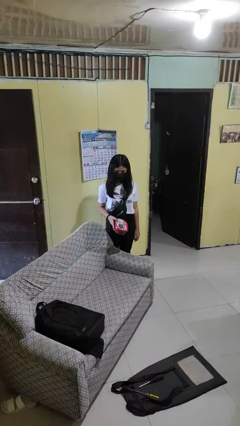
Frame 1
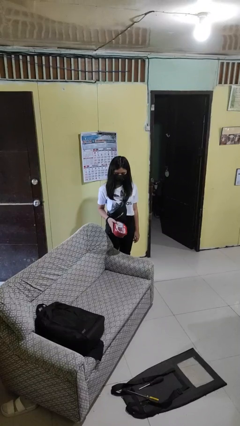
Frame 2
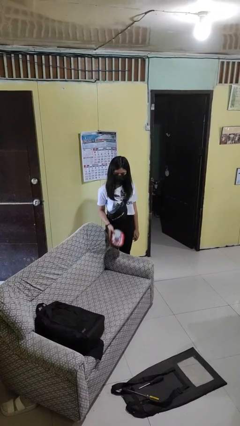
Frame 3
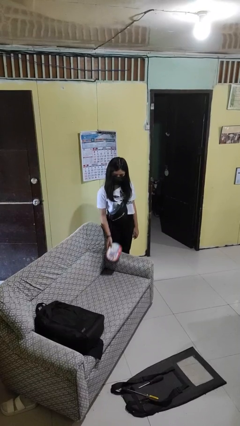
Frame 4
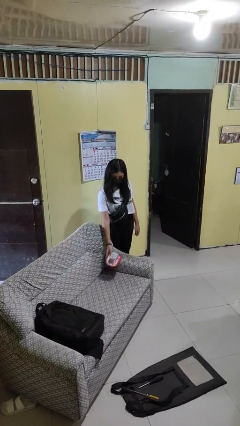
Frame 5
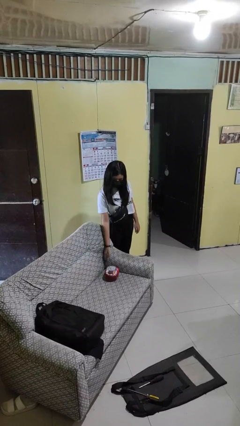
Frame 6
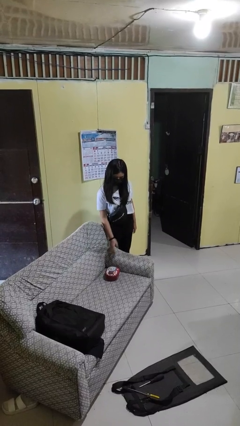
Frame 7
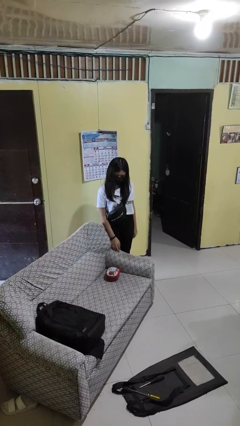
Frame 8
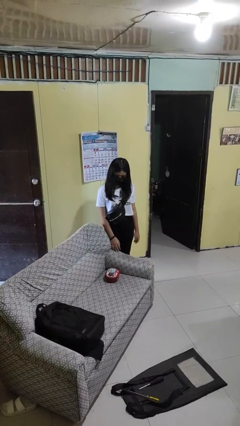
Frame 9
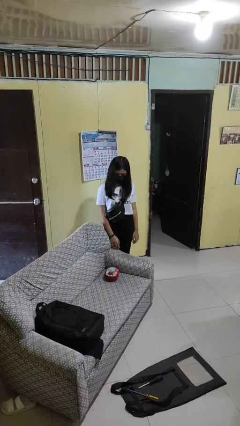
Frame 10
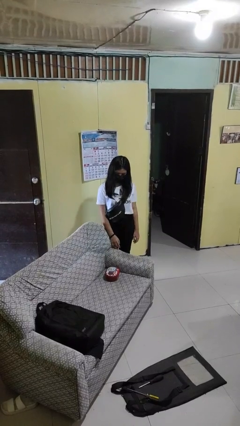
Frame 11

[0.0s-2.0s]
person puts down object on couch

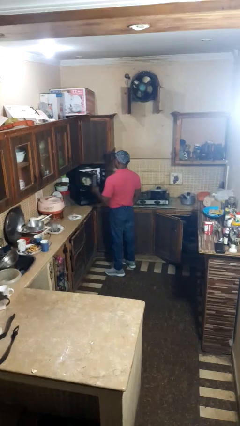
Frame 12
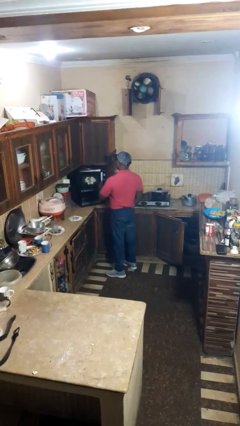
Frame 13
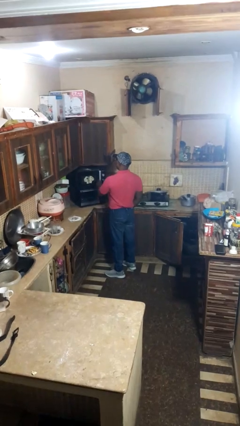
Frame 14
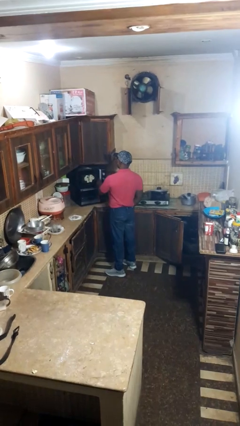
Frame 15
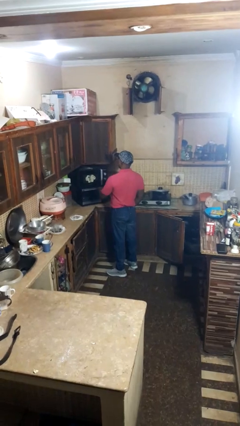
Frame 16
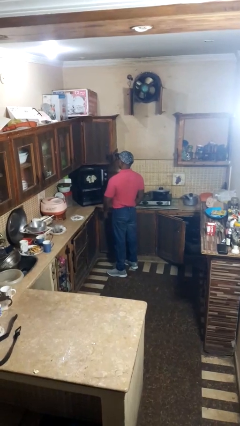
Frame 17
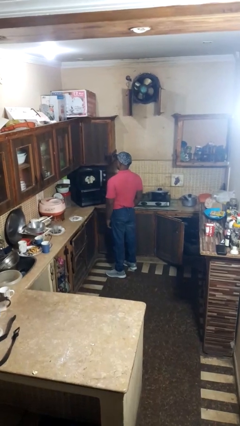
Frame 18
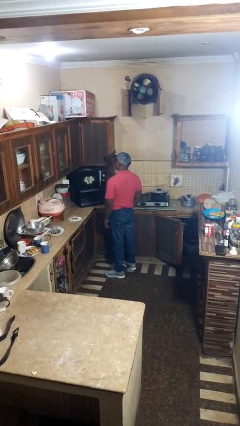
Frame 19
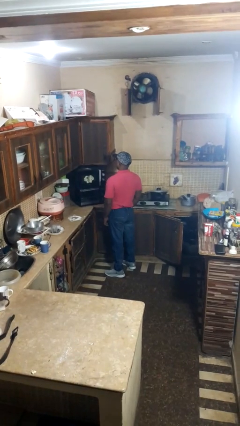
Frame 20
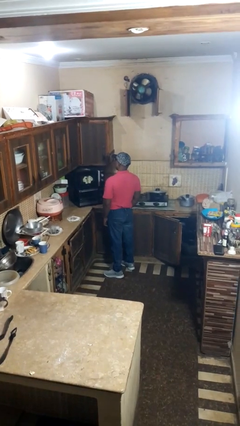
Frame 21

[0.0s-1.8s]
person closes microwave

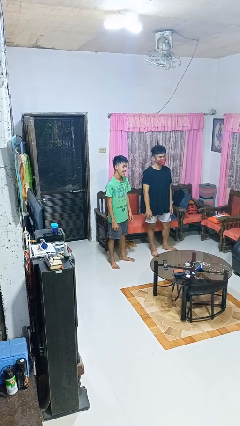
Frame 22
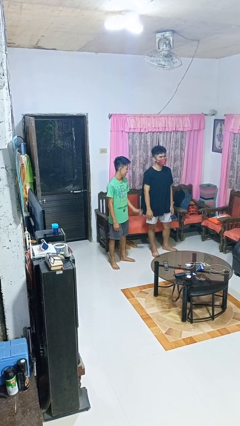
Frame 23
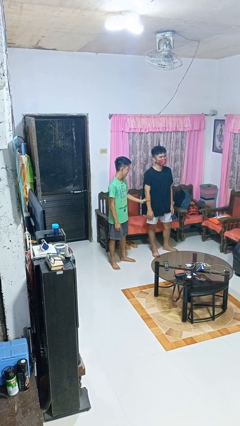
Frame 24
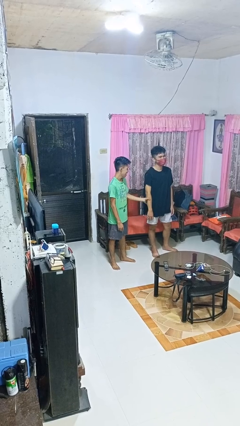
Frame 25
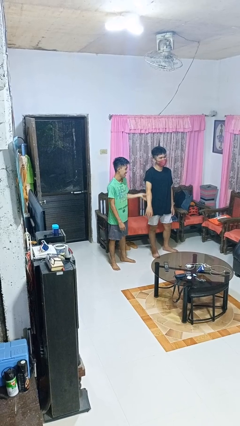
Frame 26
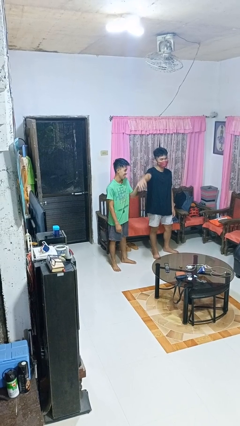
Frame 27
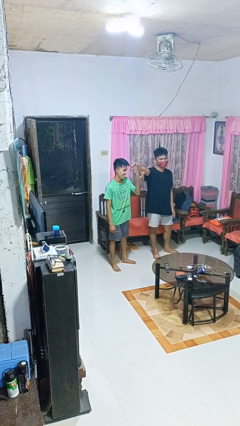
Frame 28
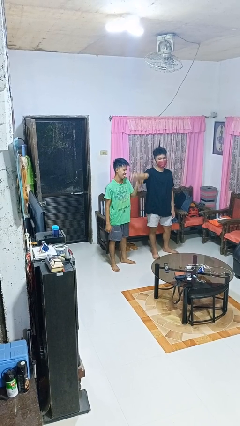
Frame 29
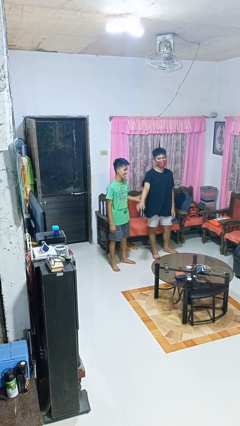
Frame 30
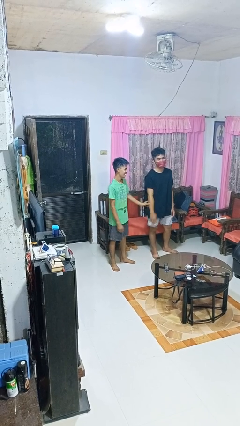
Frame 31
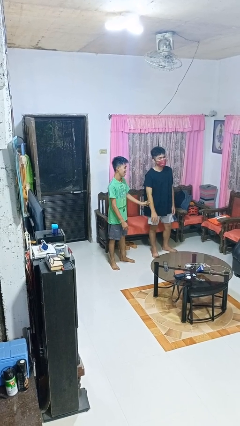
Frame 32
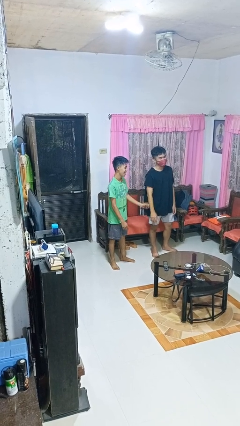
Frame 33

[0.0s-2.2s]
person grabs person by forearm

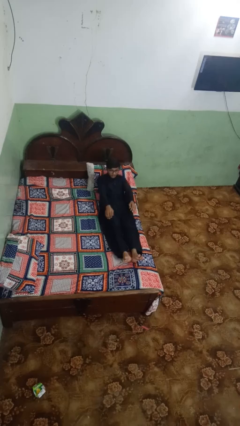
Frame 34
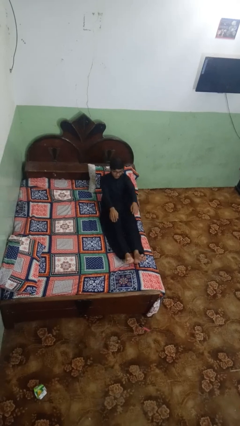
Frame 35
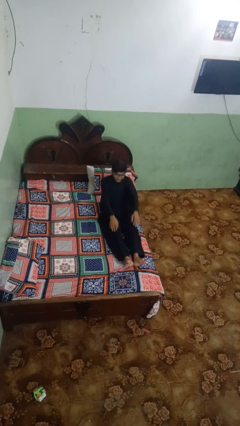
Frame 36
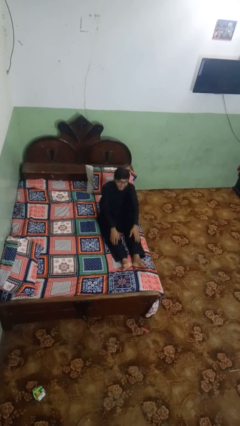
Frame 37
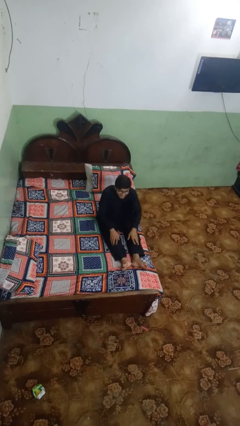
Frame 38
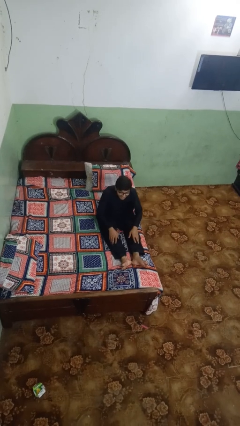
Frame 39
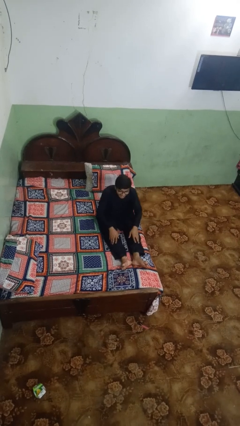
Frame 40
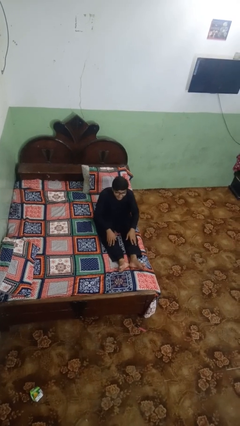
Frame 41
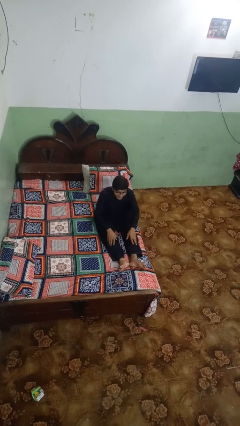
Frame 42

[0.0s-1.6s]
person stands up

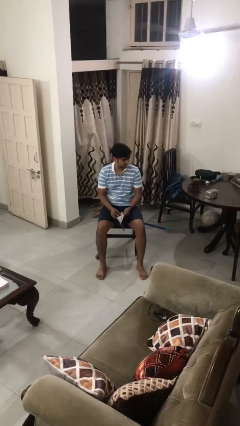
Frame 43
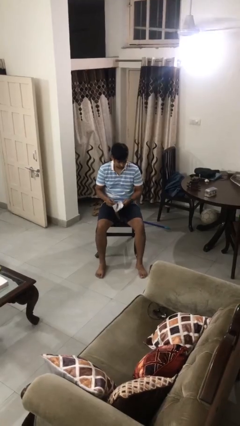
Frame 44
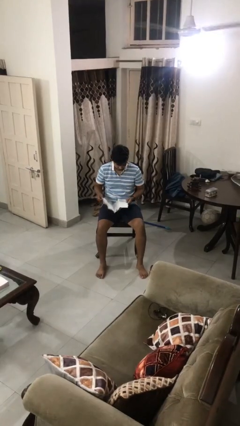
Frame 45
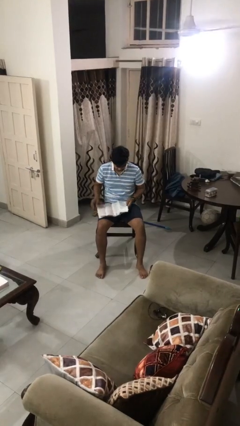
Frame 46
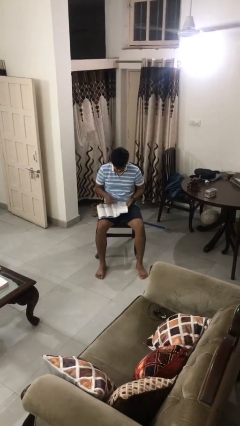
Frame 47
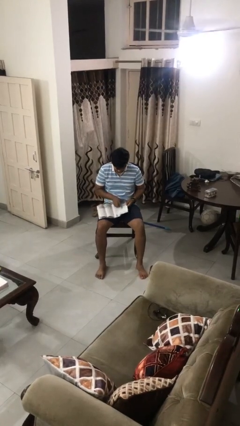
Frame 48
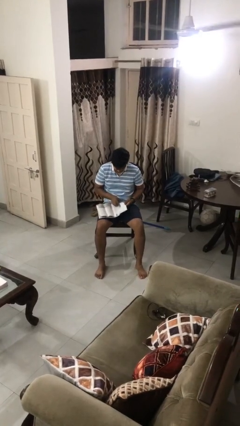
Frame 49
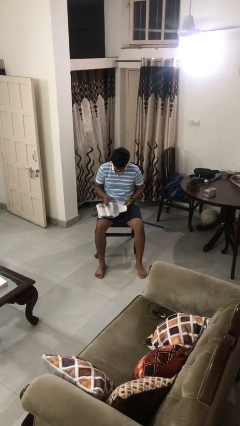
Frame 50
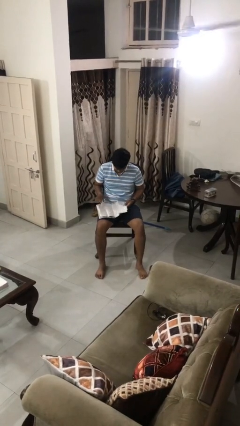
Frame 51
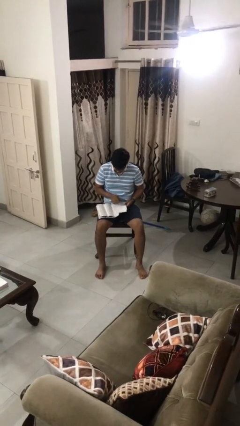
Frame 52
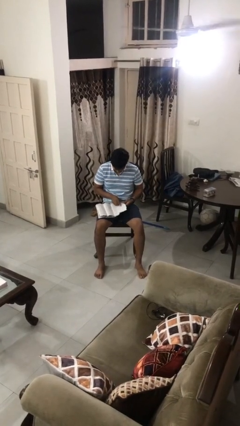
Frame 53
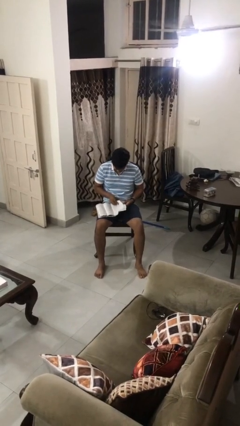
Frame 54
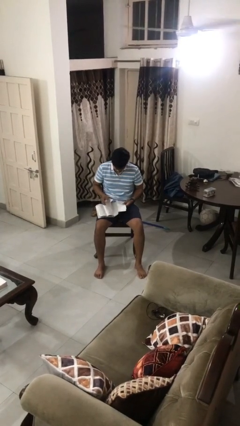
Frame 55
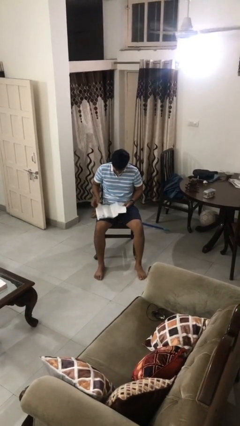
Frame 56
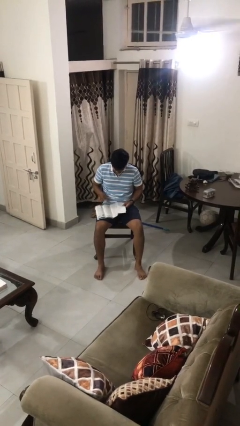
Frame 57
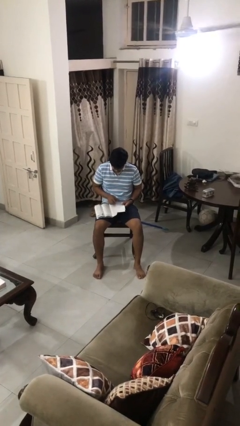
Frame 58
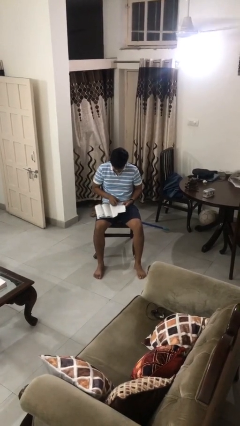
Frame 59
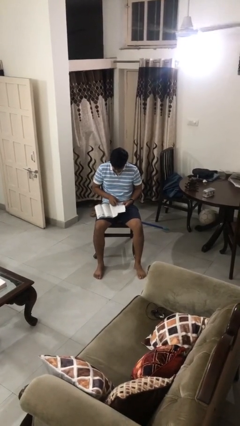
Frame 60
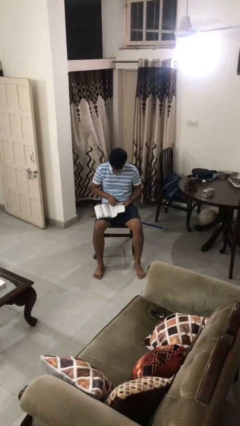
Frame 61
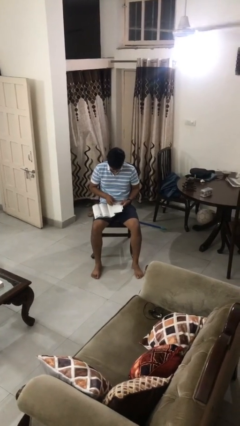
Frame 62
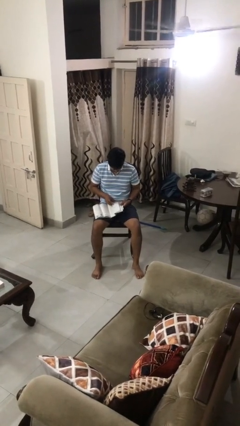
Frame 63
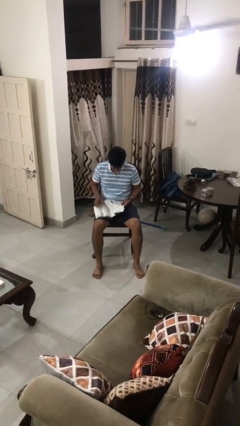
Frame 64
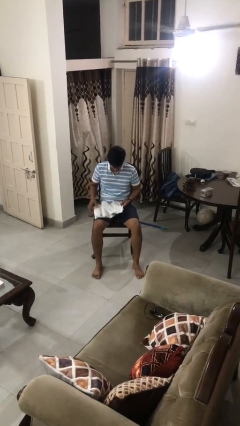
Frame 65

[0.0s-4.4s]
person reads magazine

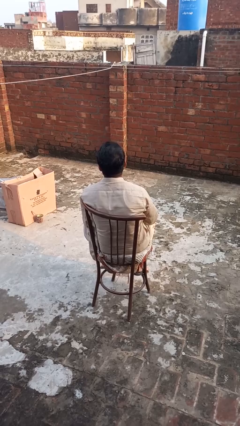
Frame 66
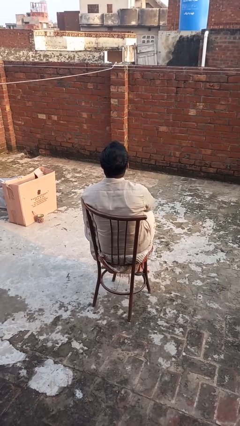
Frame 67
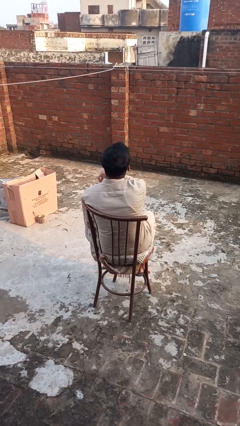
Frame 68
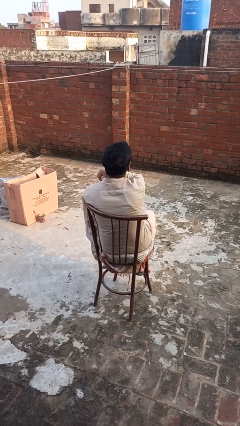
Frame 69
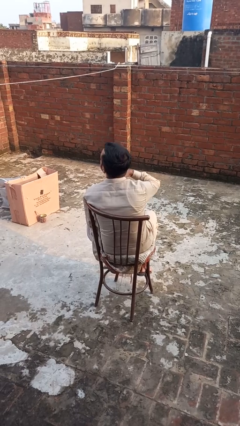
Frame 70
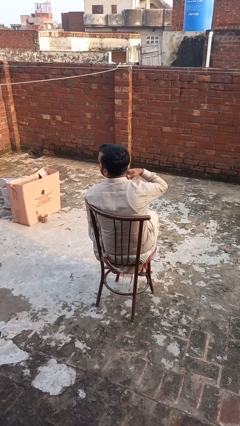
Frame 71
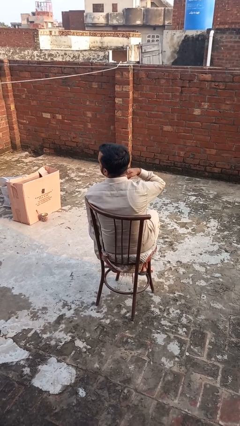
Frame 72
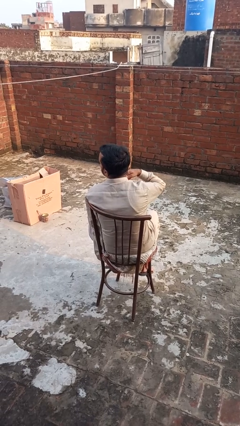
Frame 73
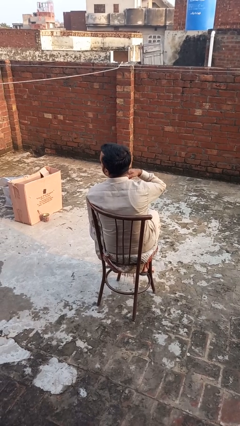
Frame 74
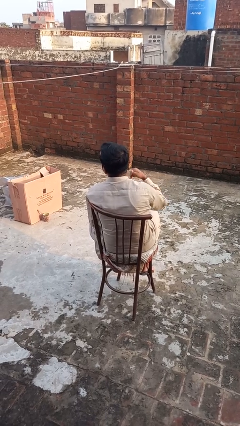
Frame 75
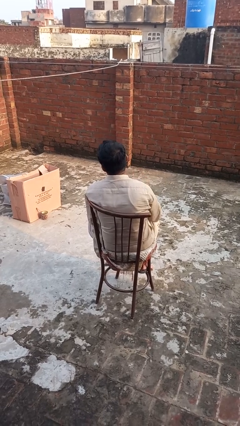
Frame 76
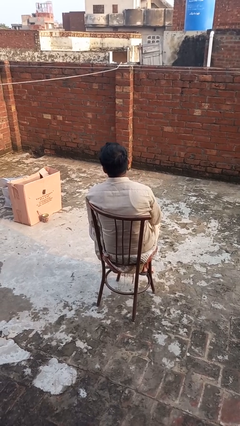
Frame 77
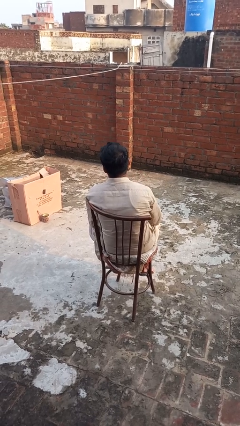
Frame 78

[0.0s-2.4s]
person gestures cut

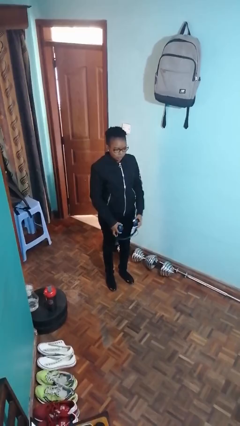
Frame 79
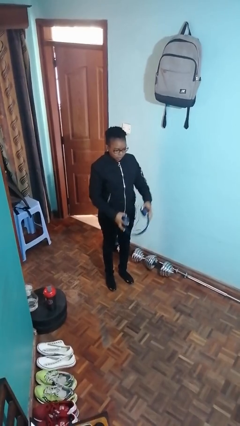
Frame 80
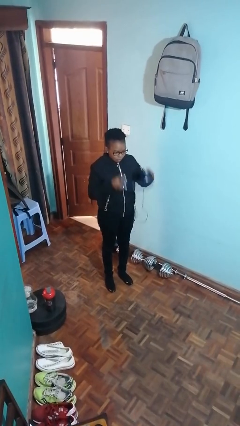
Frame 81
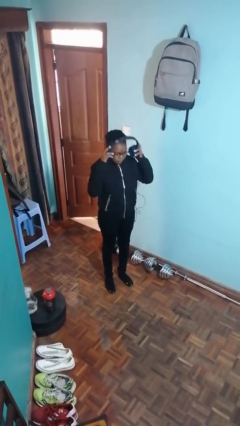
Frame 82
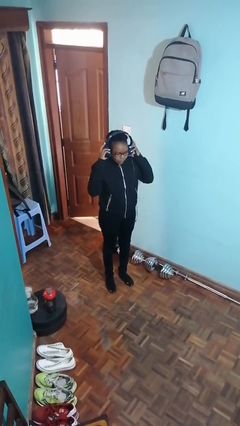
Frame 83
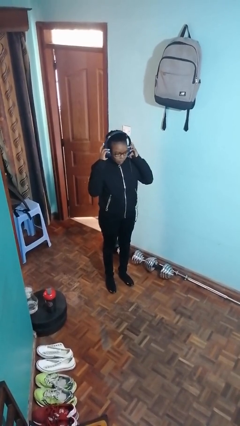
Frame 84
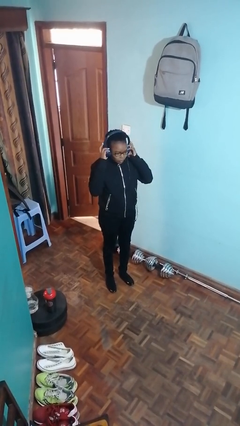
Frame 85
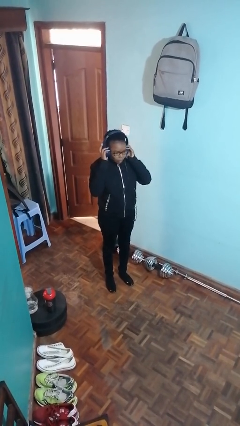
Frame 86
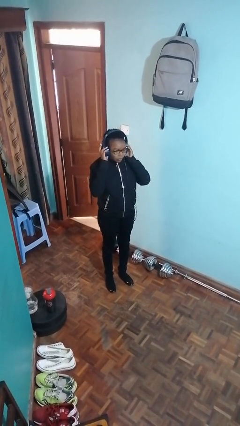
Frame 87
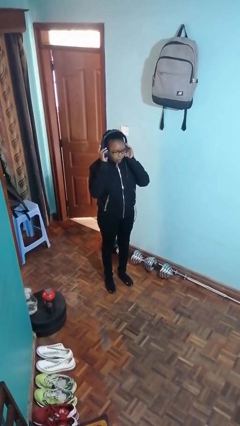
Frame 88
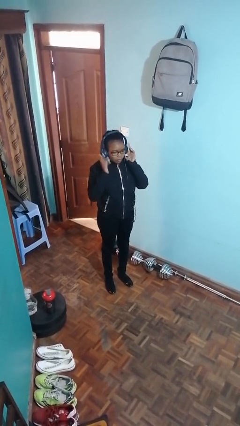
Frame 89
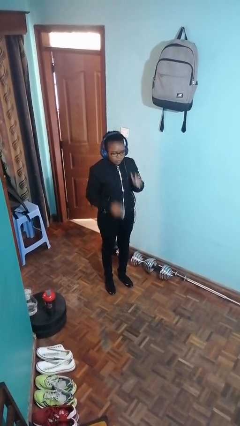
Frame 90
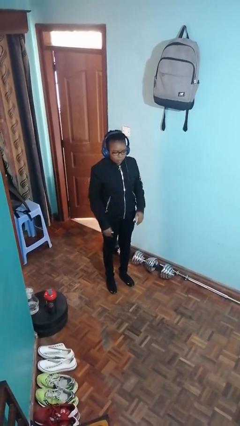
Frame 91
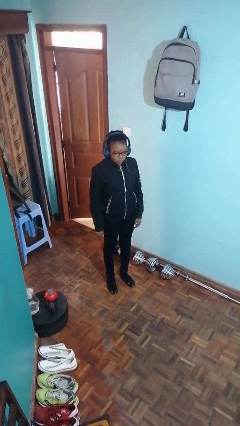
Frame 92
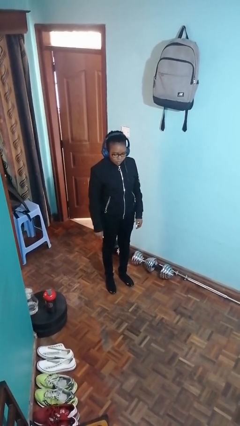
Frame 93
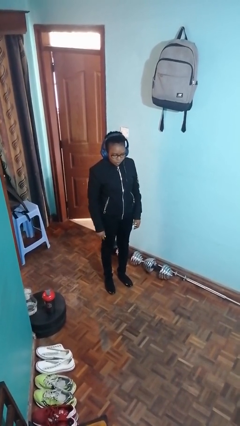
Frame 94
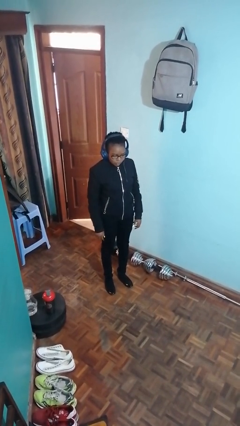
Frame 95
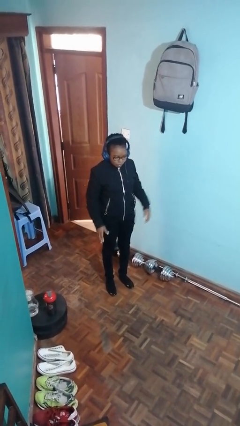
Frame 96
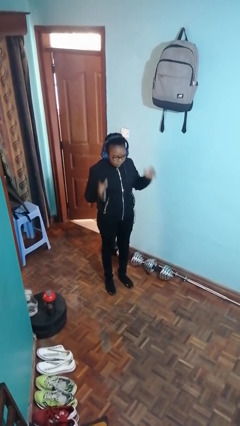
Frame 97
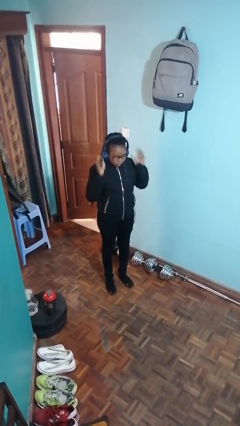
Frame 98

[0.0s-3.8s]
person puts on headphones
